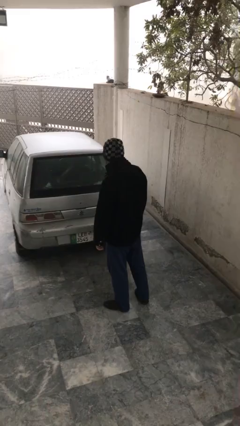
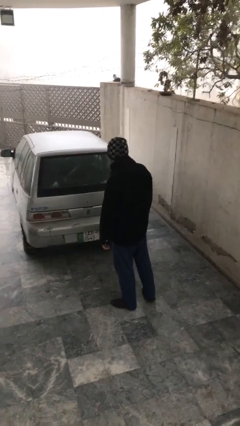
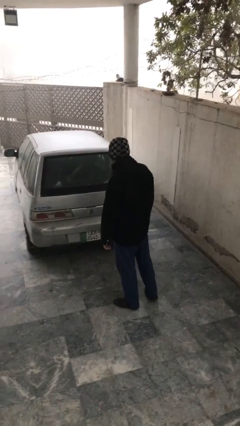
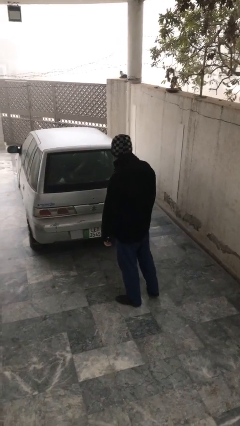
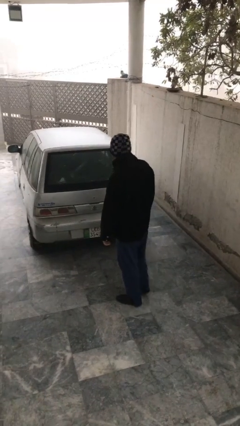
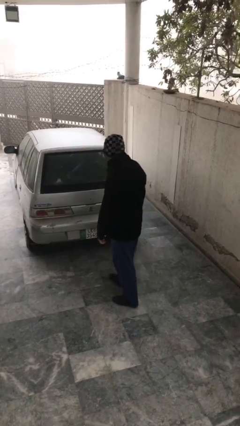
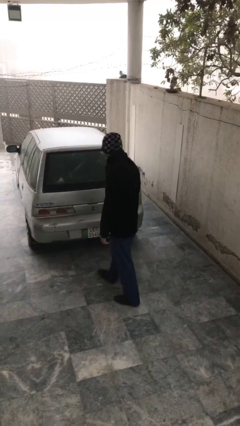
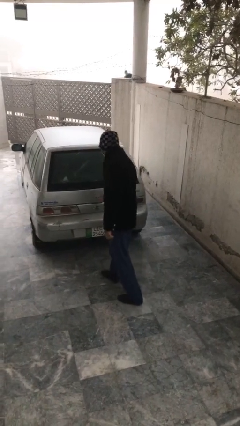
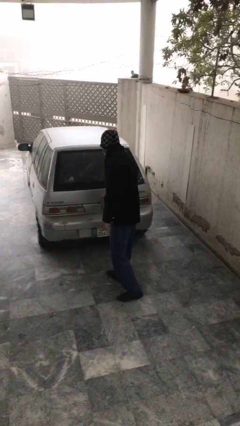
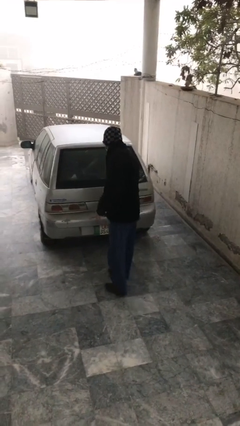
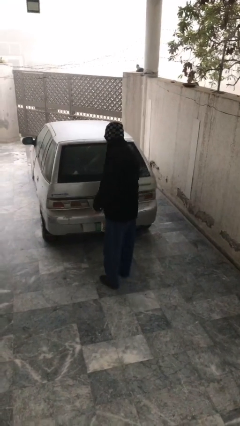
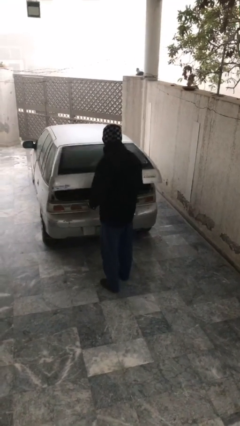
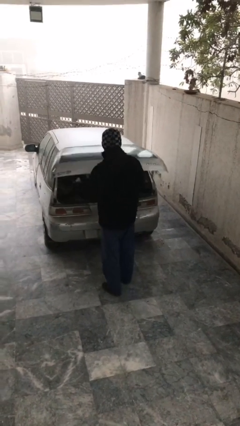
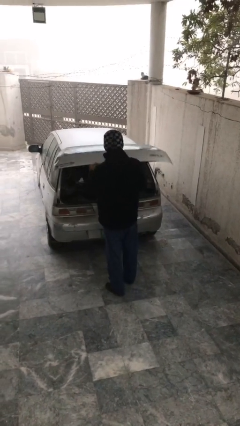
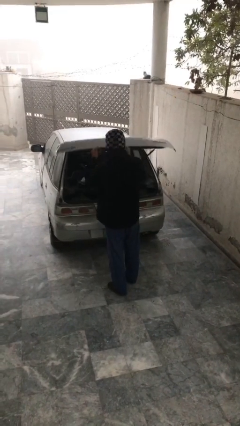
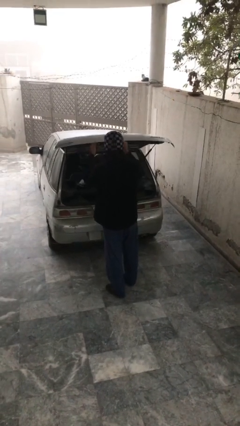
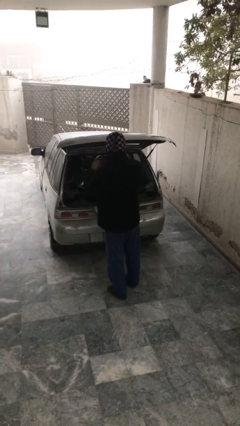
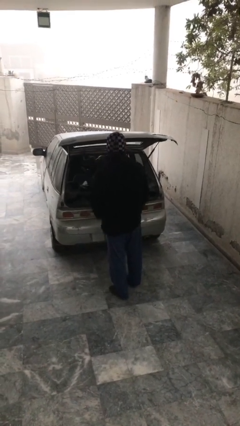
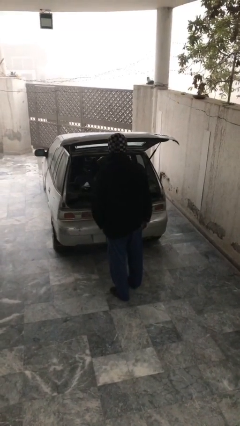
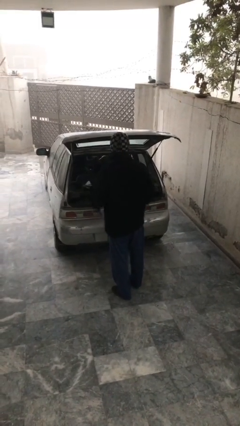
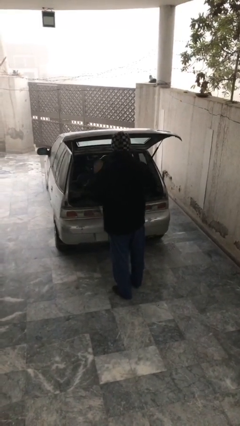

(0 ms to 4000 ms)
person opens car trunk

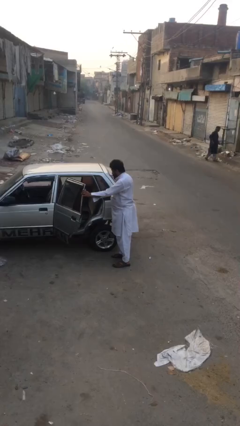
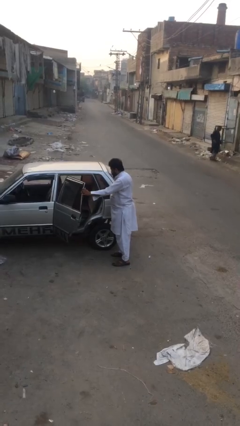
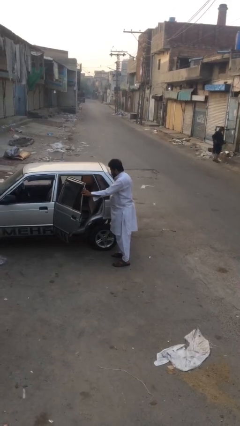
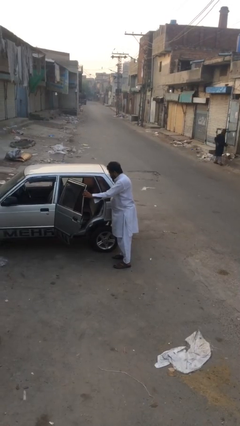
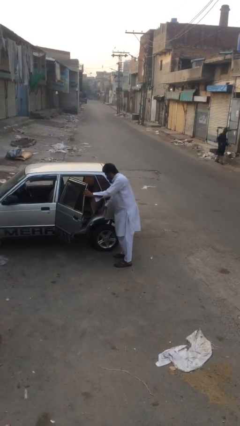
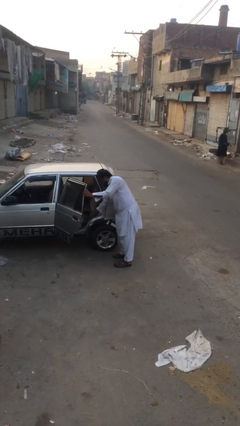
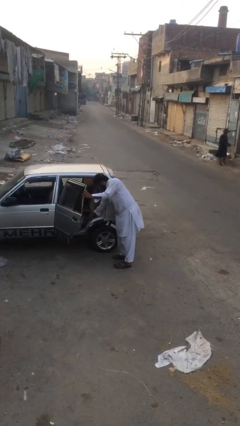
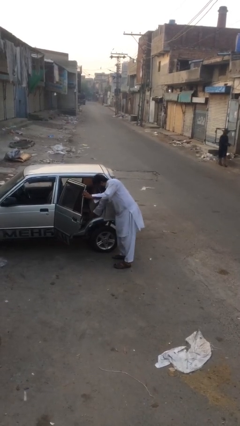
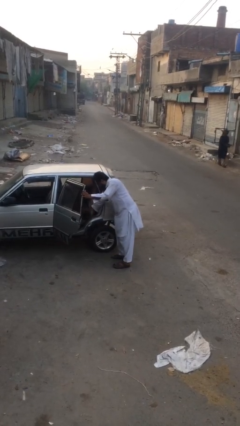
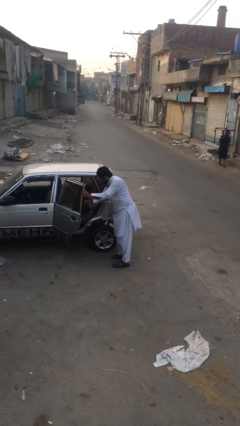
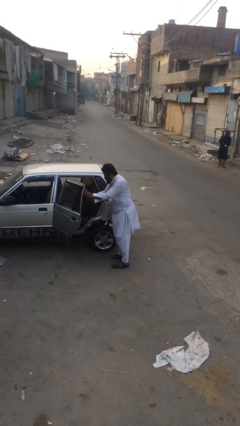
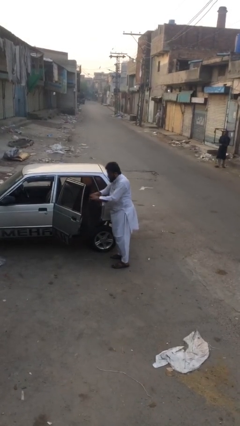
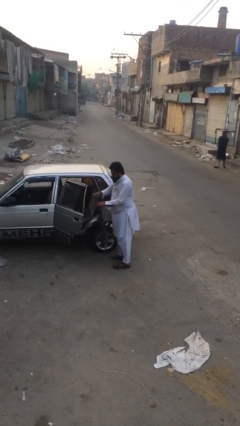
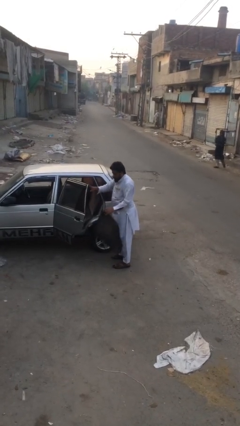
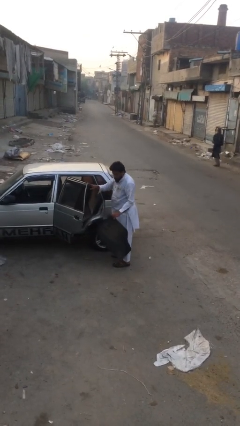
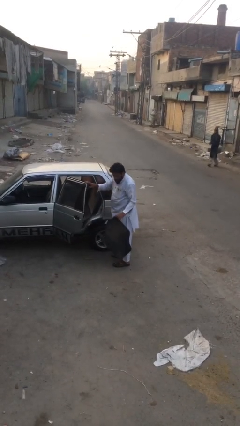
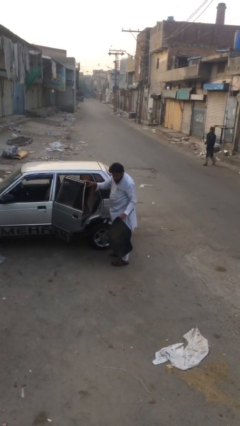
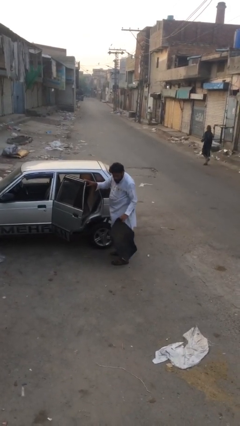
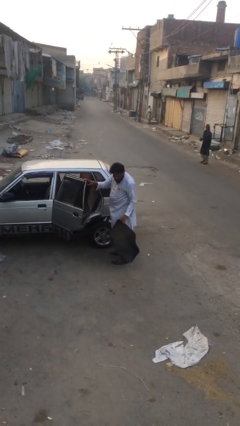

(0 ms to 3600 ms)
person unloads car

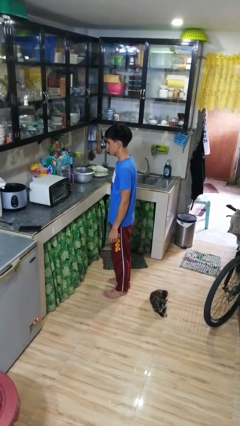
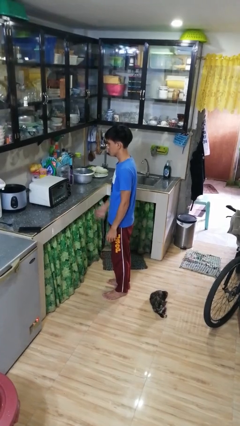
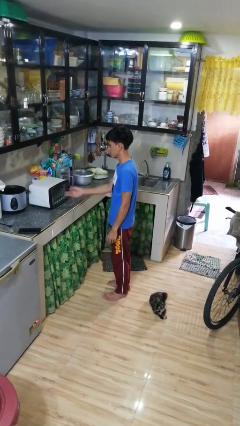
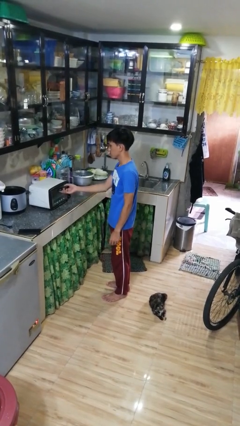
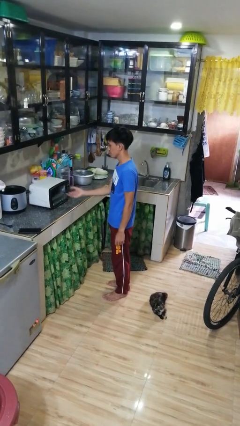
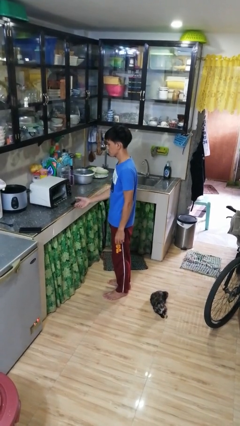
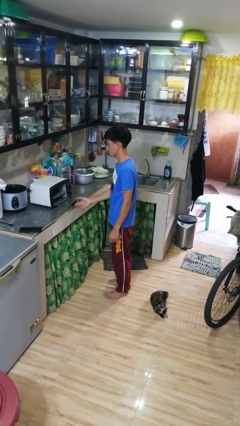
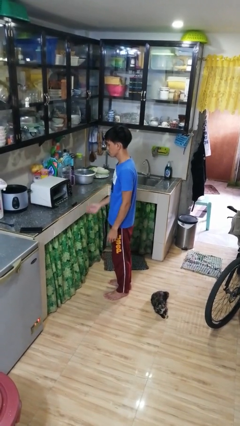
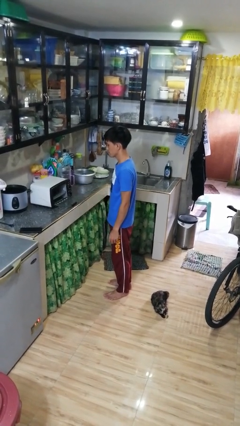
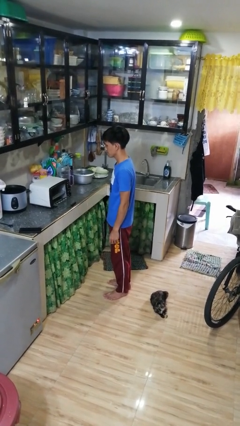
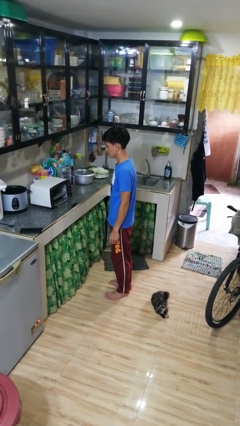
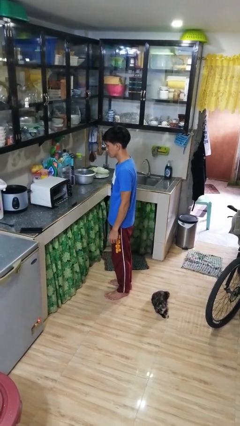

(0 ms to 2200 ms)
person opens microwave

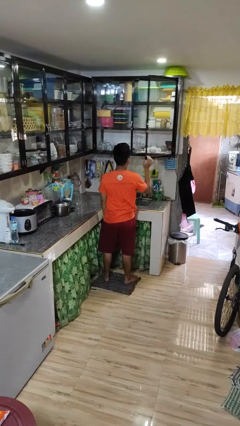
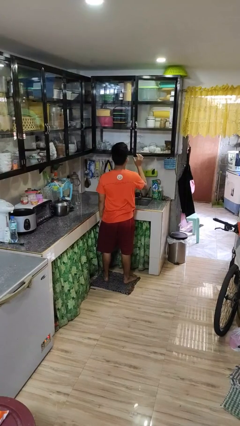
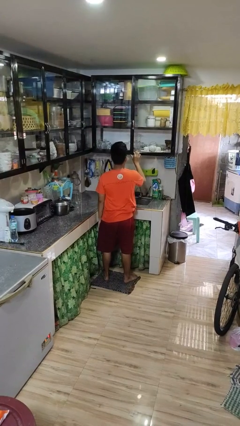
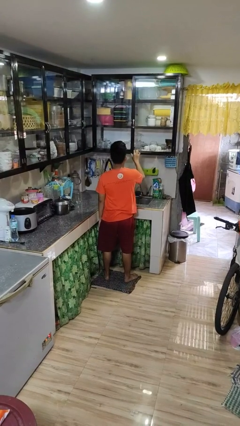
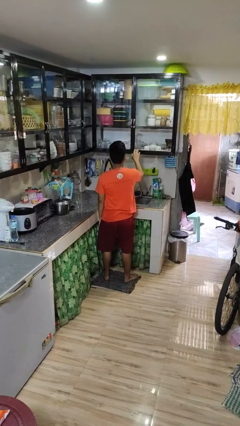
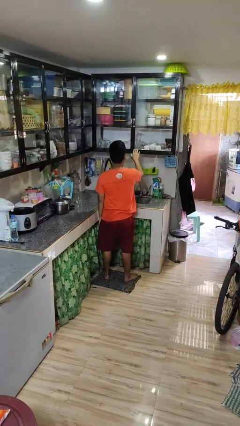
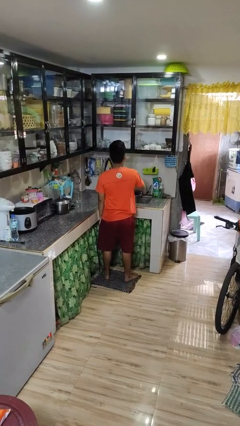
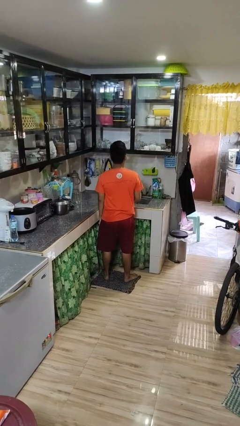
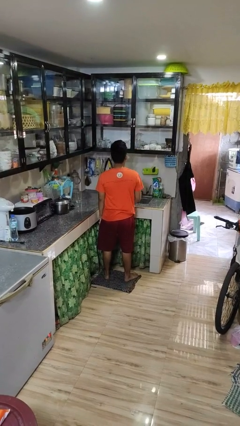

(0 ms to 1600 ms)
person closes cabinet

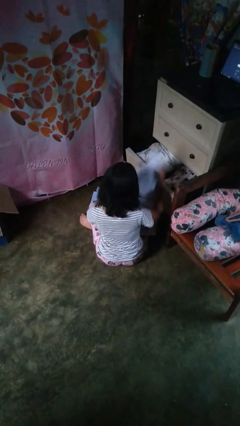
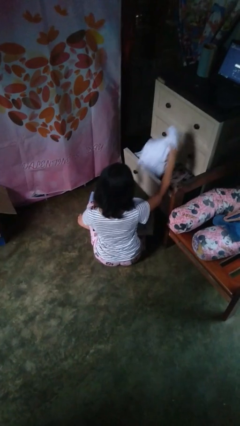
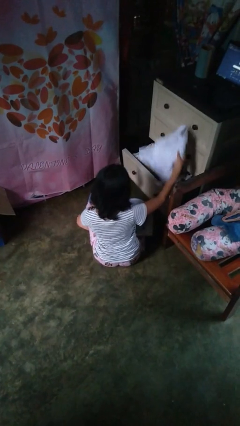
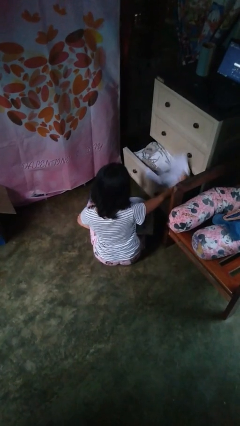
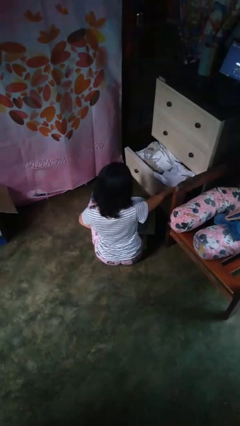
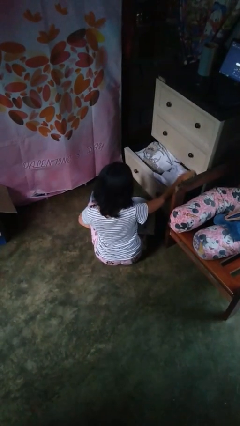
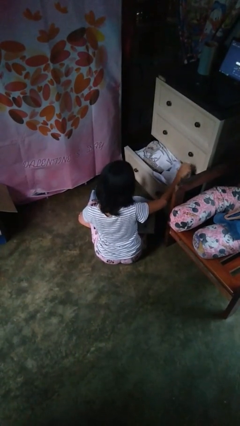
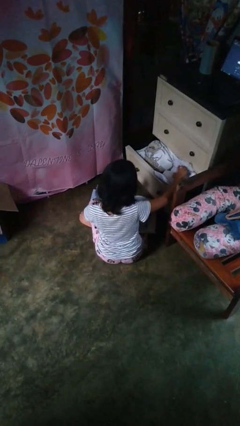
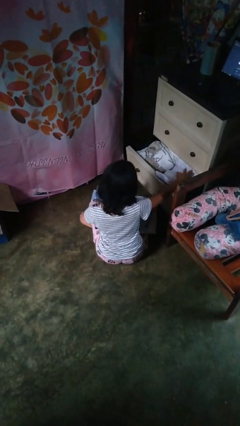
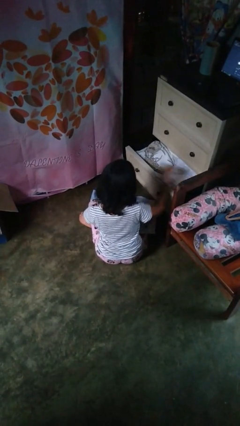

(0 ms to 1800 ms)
person puts clothes into dresser

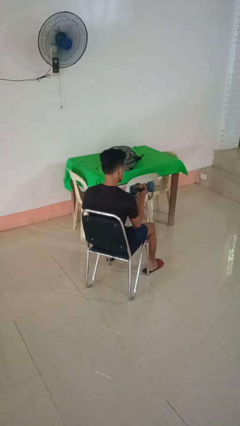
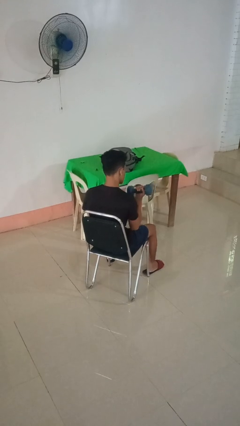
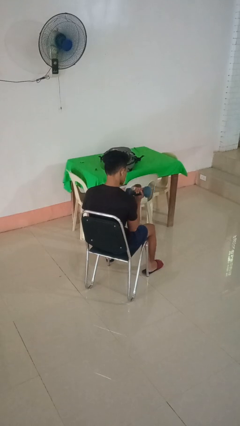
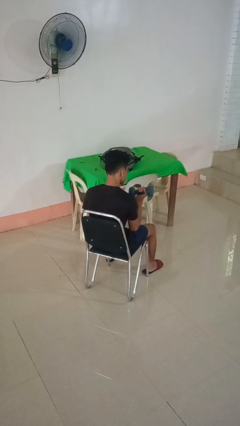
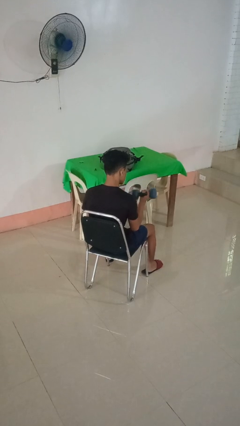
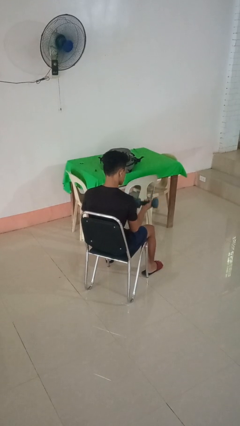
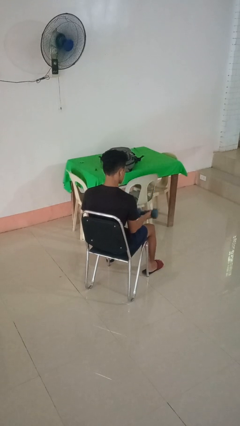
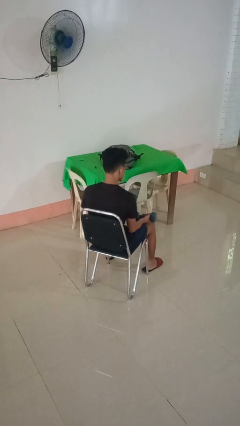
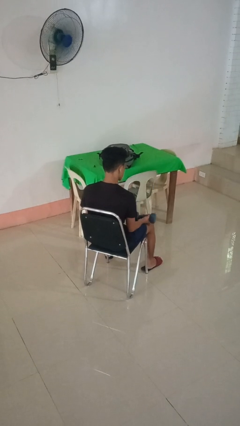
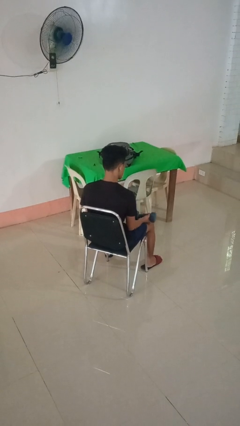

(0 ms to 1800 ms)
person lifts dumbbells

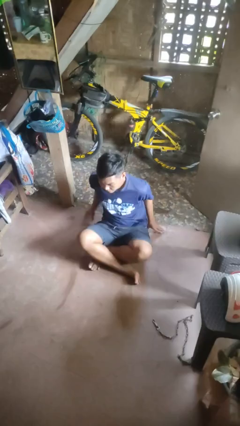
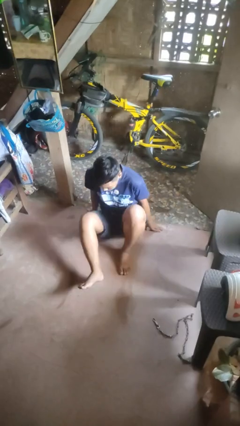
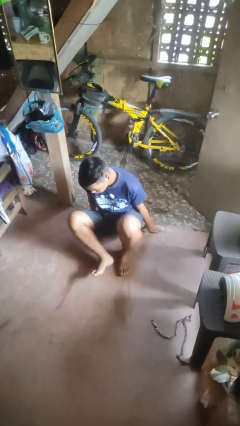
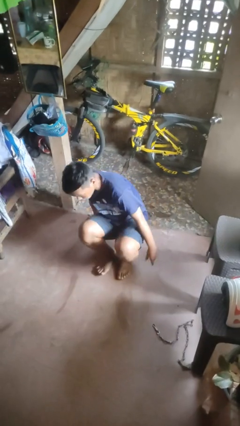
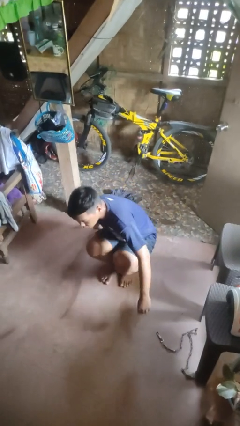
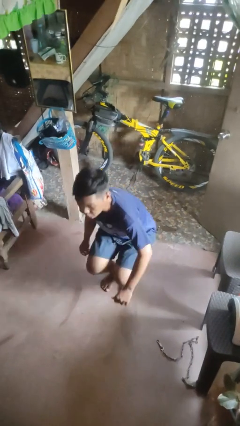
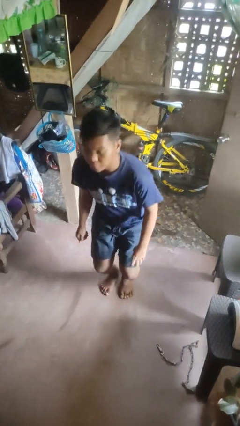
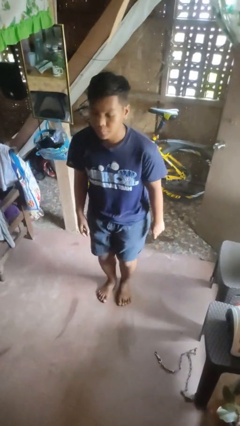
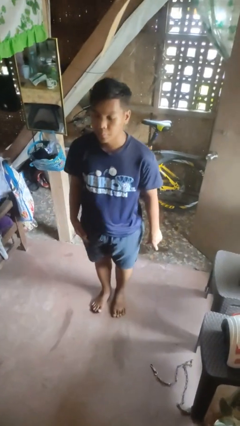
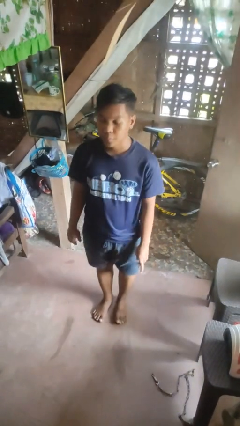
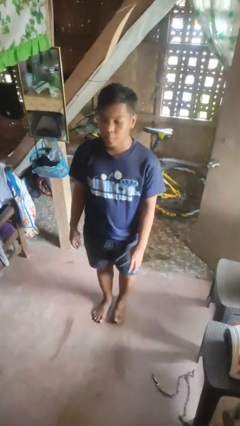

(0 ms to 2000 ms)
person stands up from floor
